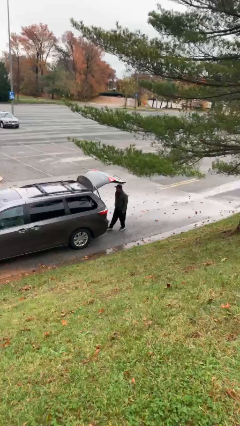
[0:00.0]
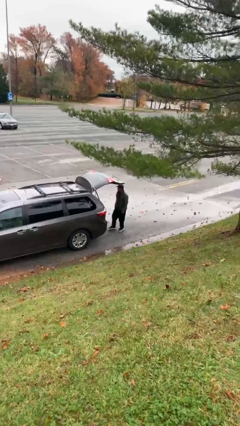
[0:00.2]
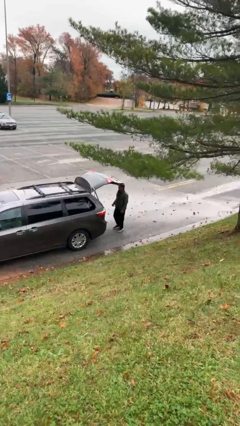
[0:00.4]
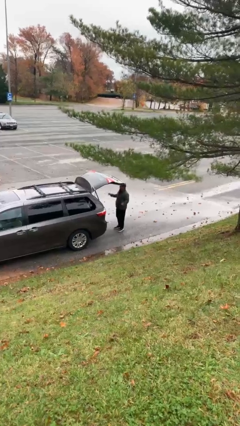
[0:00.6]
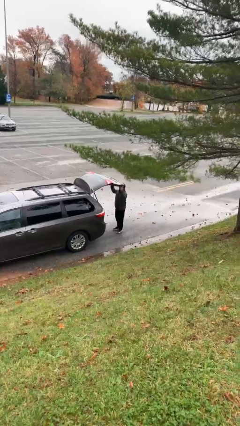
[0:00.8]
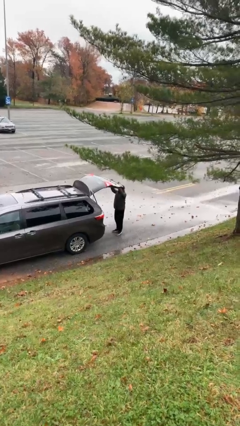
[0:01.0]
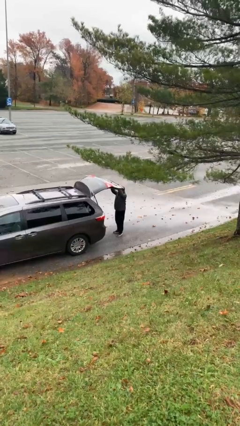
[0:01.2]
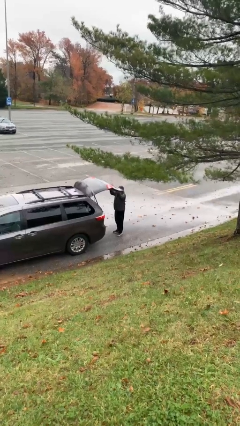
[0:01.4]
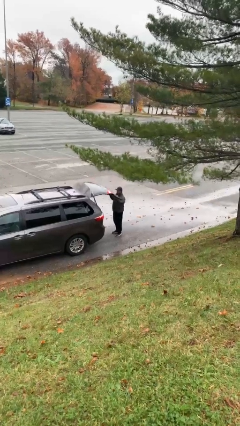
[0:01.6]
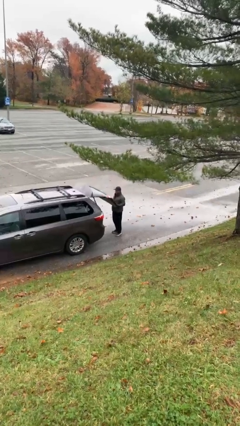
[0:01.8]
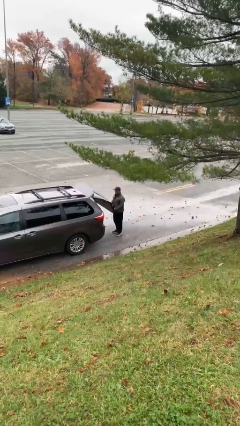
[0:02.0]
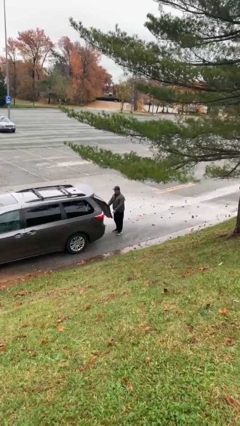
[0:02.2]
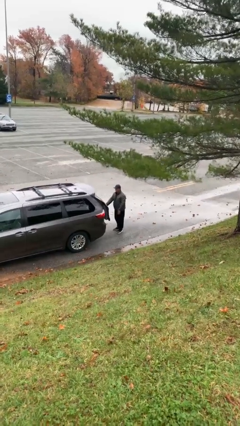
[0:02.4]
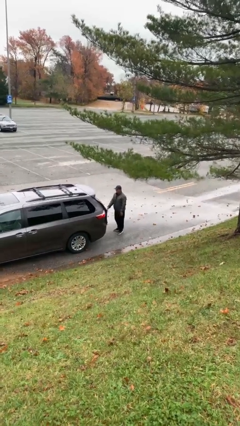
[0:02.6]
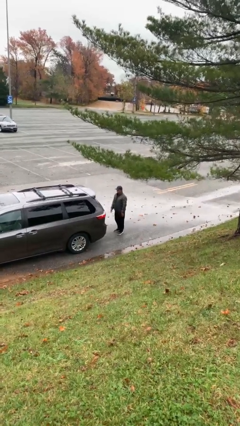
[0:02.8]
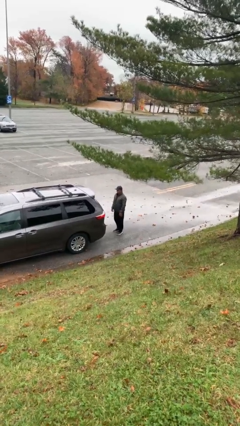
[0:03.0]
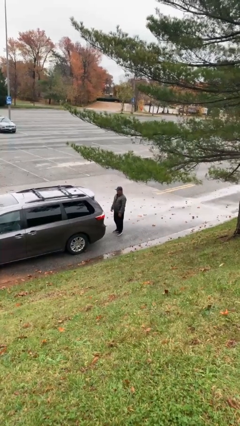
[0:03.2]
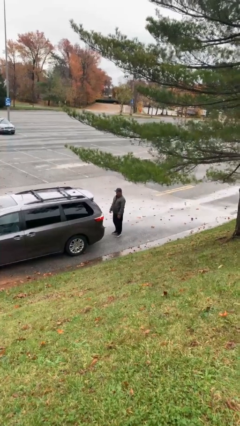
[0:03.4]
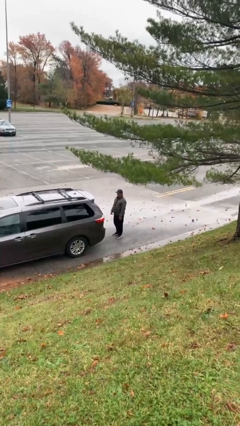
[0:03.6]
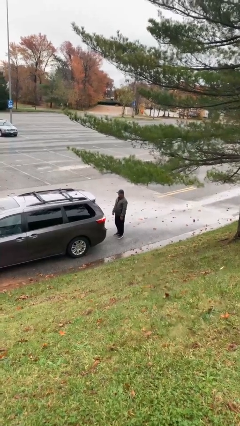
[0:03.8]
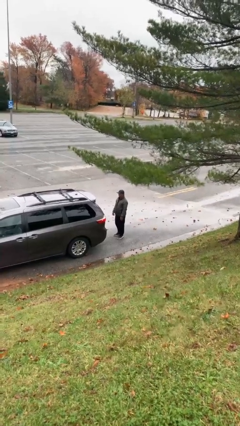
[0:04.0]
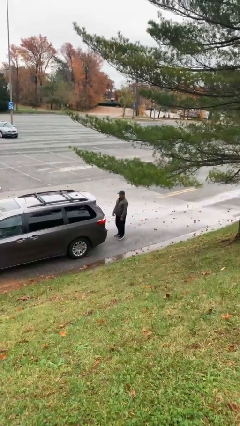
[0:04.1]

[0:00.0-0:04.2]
person closes car trunk

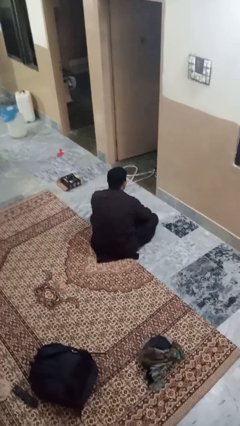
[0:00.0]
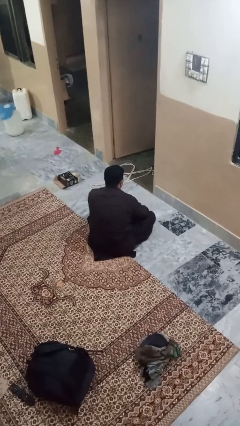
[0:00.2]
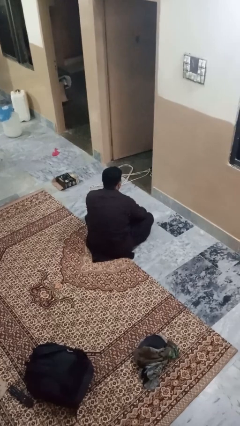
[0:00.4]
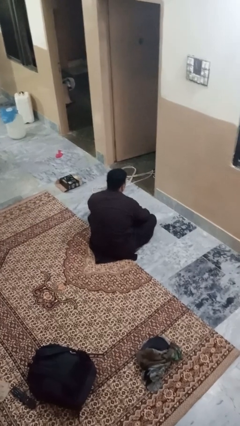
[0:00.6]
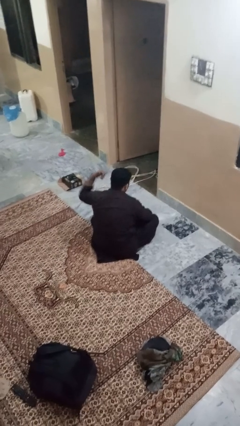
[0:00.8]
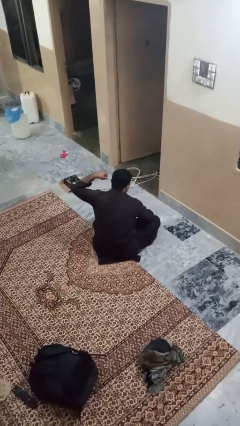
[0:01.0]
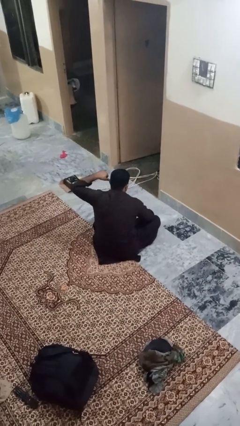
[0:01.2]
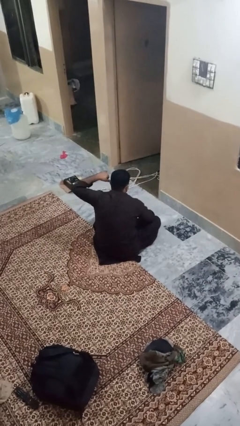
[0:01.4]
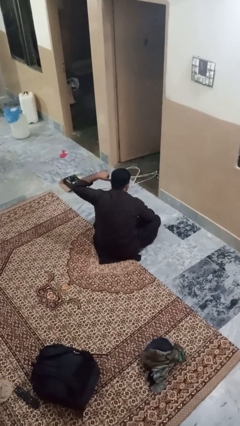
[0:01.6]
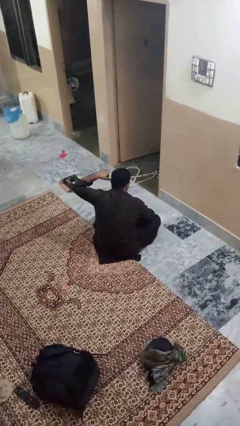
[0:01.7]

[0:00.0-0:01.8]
person gestures call me

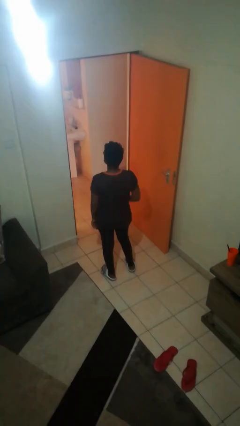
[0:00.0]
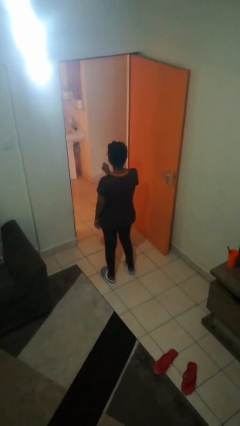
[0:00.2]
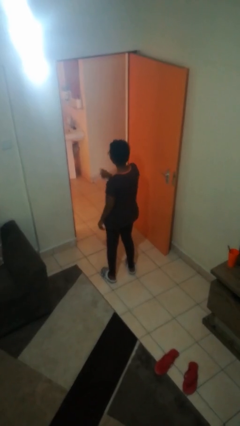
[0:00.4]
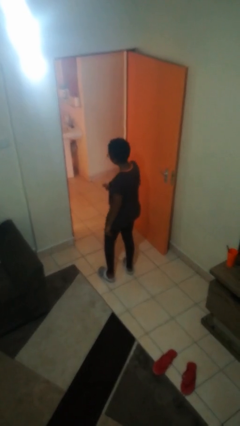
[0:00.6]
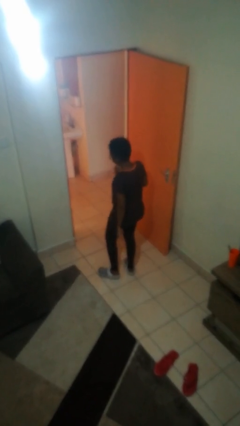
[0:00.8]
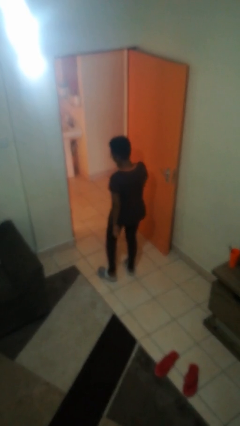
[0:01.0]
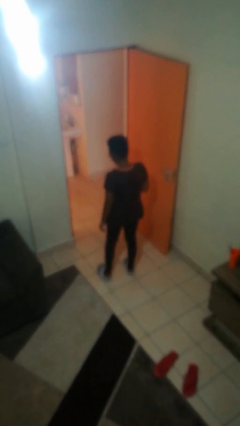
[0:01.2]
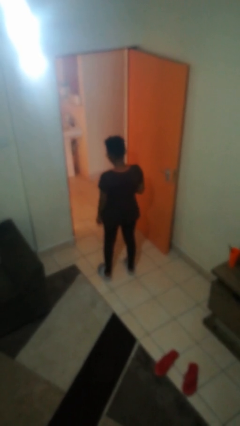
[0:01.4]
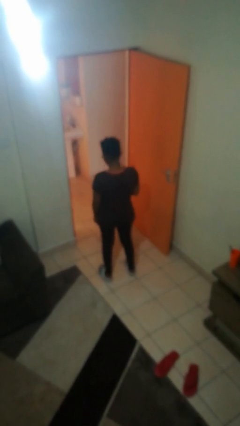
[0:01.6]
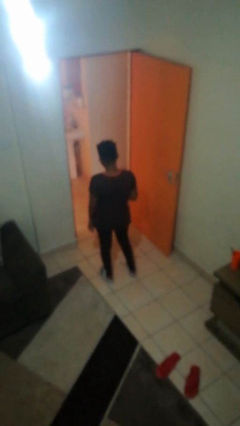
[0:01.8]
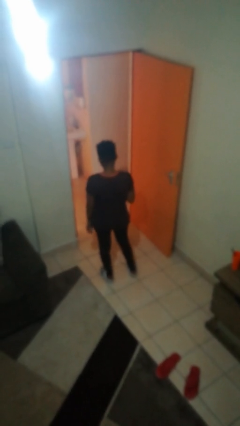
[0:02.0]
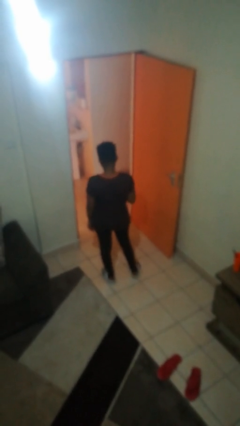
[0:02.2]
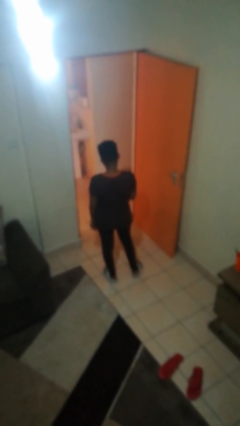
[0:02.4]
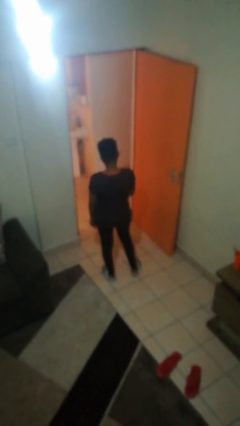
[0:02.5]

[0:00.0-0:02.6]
person snaps fingers

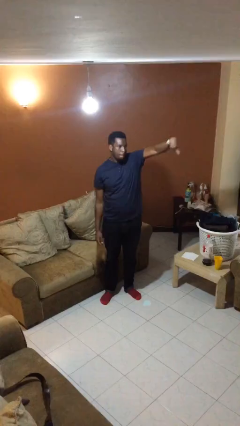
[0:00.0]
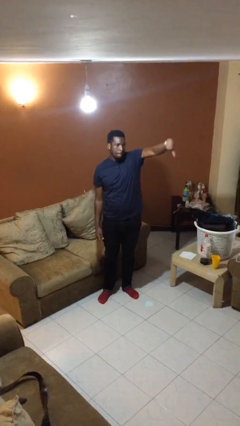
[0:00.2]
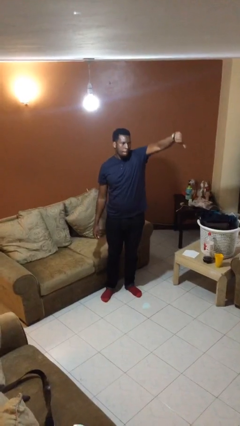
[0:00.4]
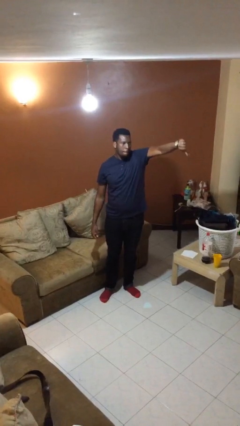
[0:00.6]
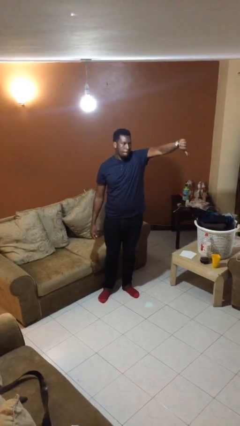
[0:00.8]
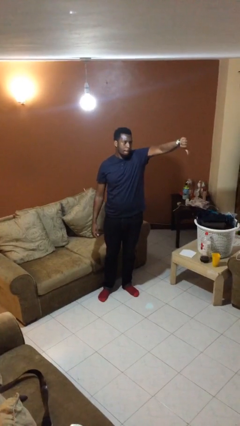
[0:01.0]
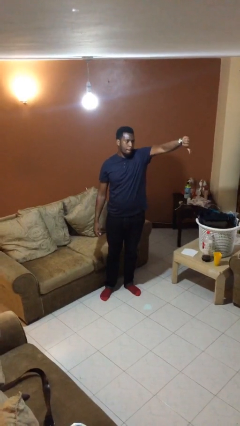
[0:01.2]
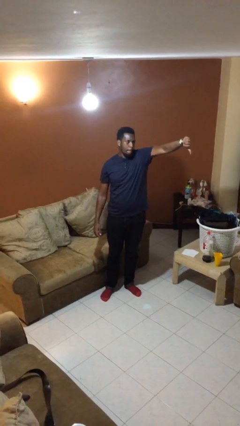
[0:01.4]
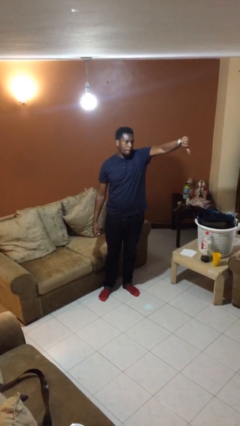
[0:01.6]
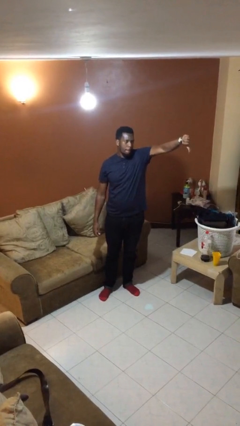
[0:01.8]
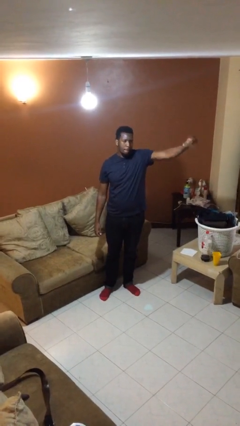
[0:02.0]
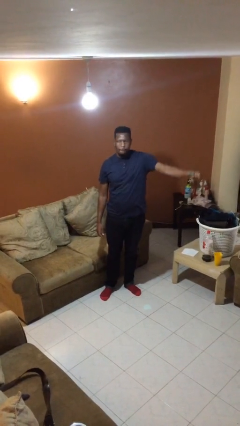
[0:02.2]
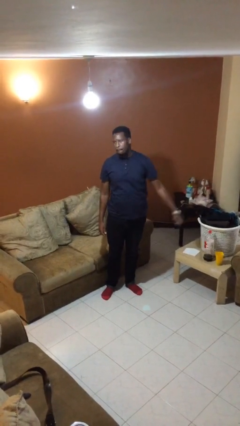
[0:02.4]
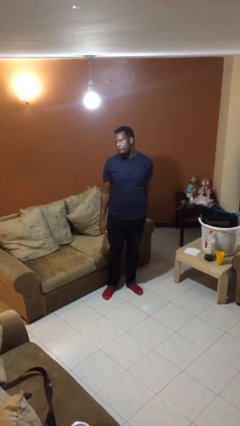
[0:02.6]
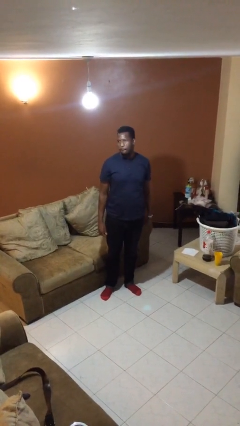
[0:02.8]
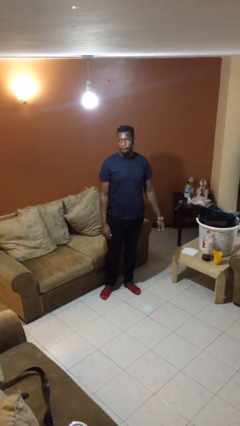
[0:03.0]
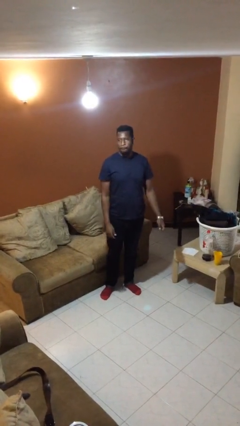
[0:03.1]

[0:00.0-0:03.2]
person gestures thumbs down

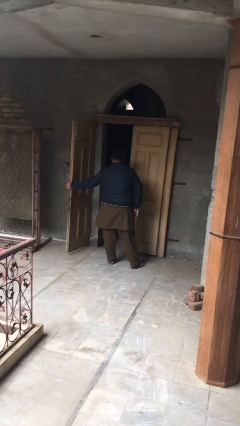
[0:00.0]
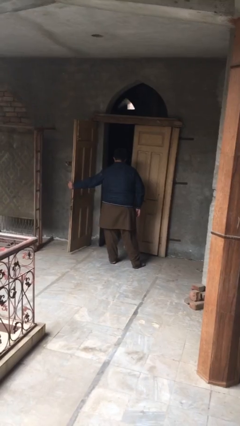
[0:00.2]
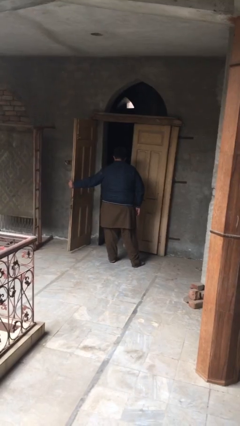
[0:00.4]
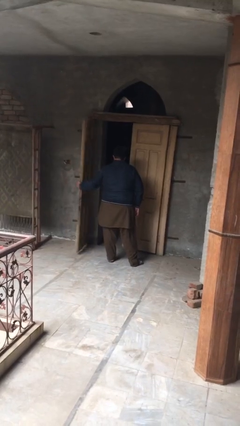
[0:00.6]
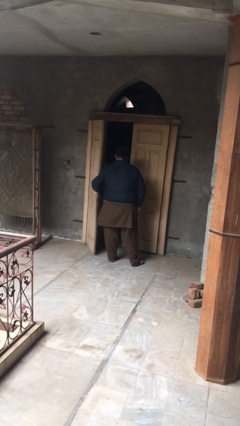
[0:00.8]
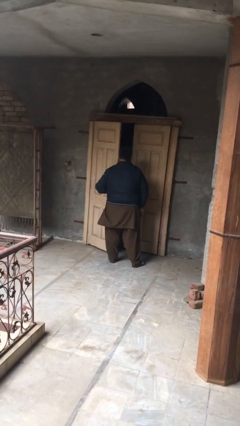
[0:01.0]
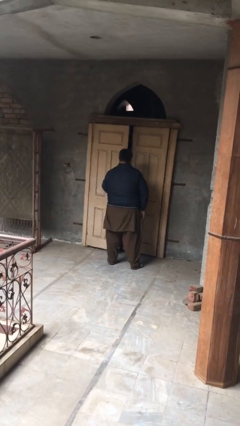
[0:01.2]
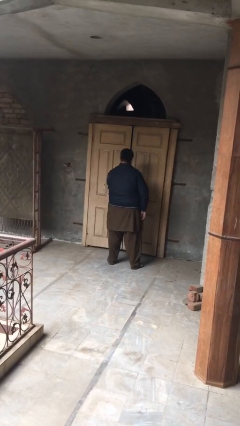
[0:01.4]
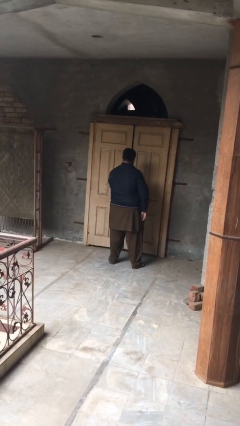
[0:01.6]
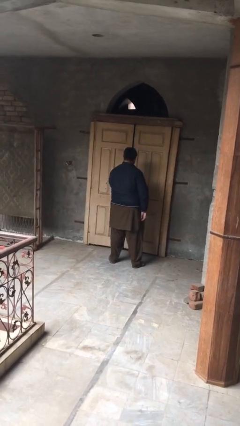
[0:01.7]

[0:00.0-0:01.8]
person closes facility door

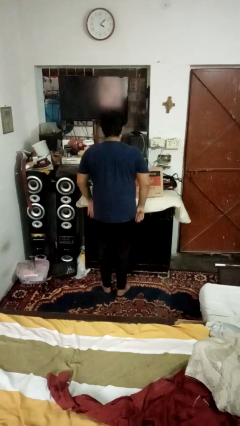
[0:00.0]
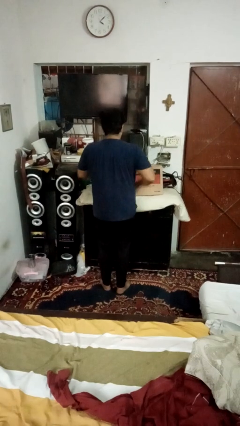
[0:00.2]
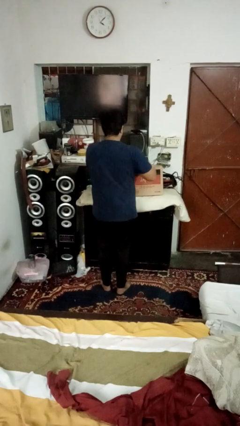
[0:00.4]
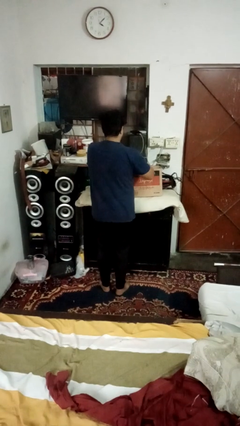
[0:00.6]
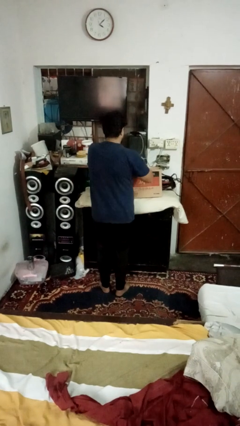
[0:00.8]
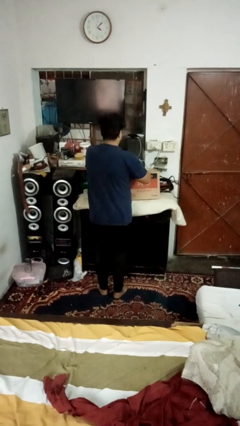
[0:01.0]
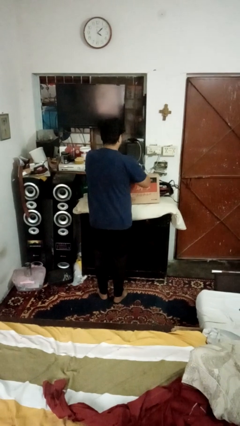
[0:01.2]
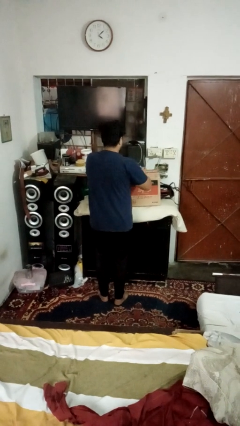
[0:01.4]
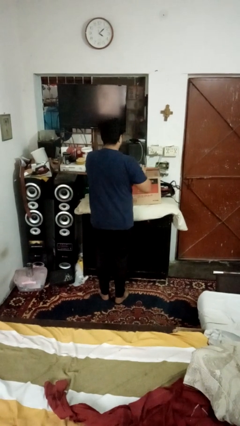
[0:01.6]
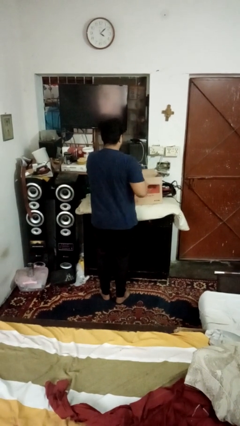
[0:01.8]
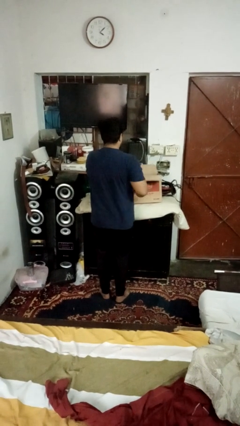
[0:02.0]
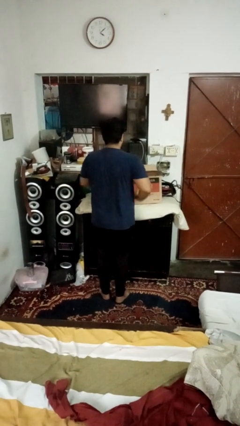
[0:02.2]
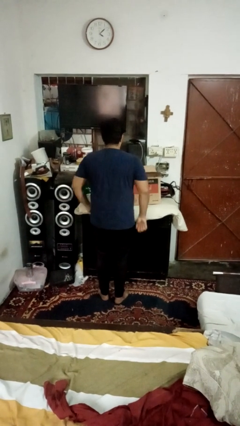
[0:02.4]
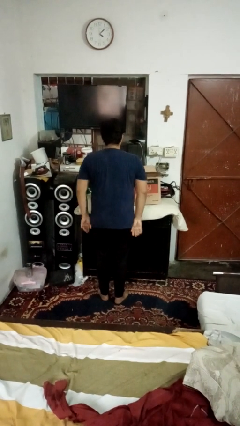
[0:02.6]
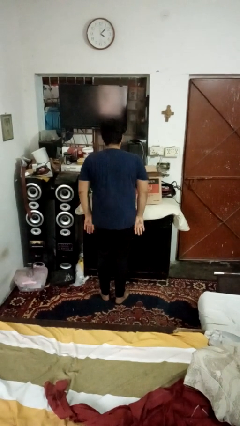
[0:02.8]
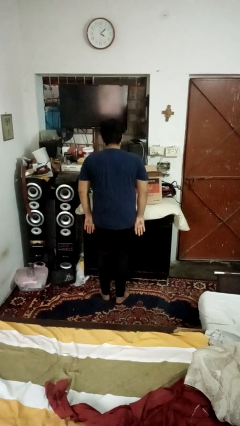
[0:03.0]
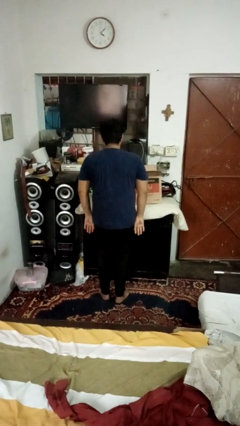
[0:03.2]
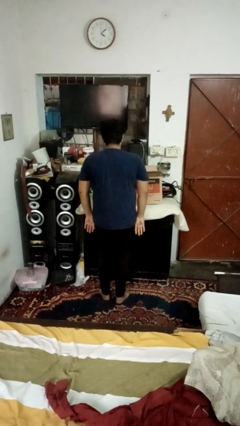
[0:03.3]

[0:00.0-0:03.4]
person opens box

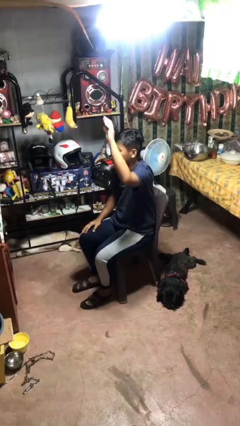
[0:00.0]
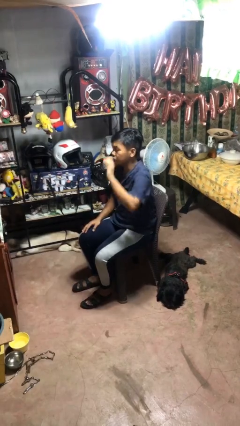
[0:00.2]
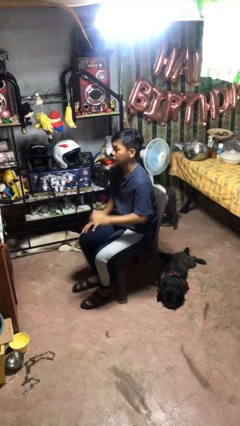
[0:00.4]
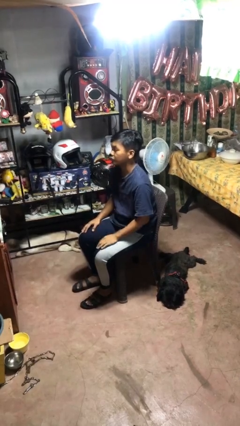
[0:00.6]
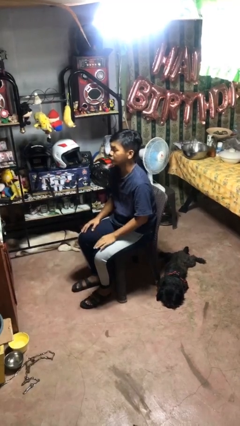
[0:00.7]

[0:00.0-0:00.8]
person gestures lower hand
